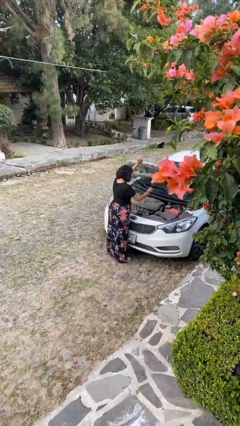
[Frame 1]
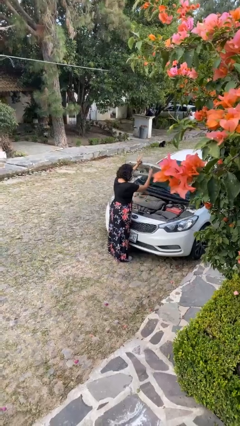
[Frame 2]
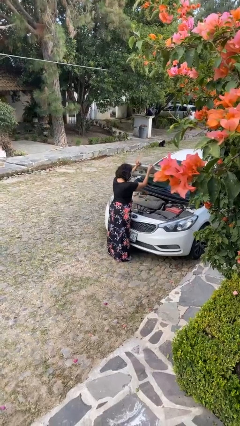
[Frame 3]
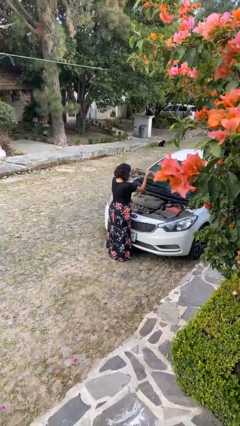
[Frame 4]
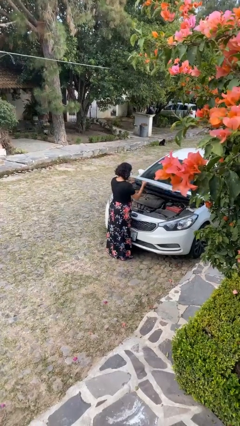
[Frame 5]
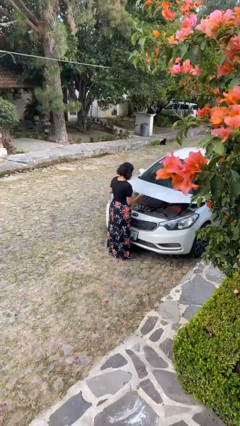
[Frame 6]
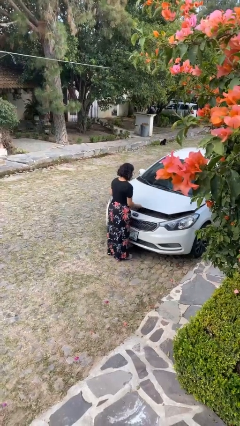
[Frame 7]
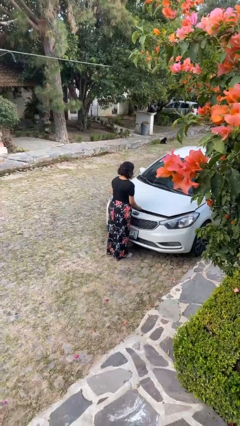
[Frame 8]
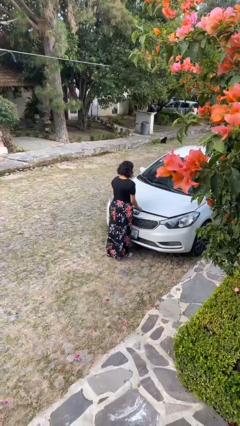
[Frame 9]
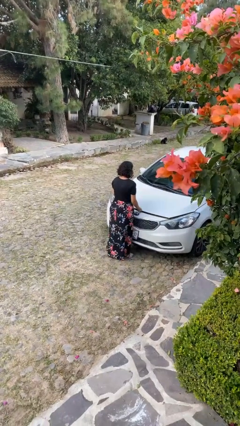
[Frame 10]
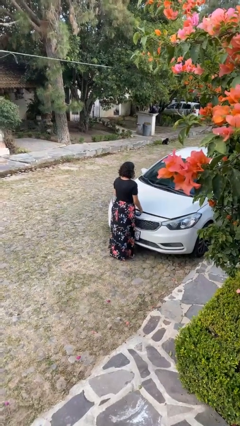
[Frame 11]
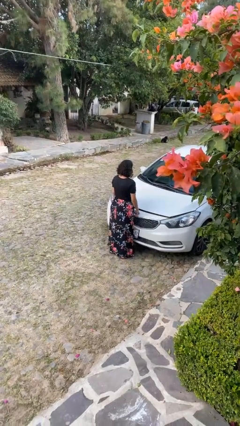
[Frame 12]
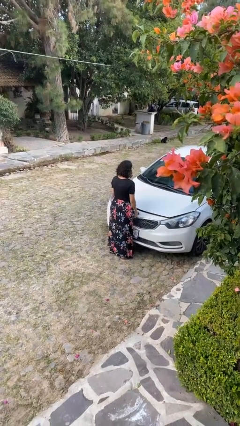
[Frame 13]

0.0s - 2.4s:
person closes car hood

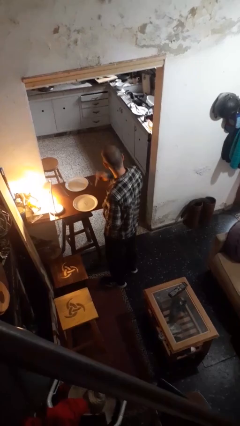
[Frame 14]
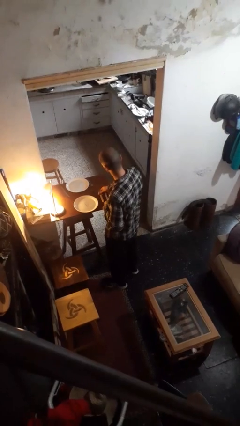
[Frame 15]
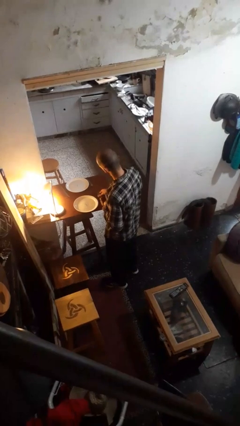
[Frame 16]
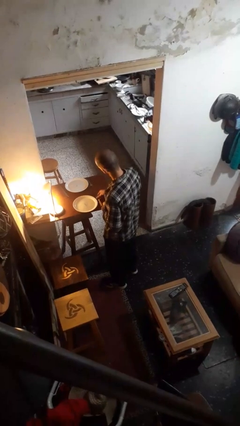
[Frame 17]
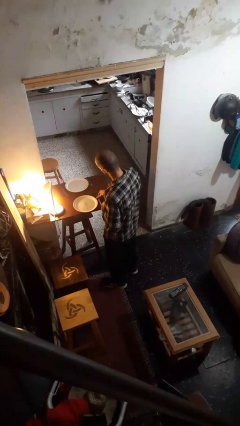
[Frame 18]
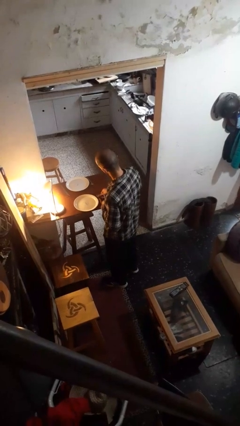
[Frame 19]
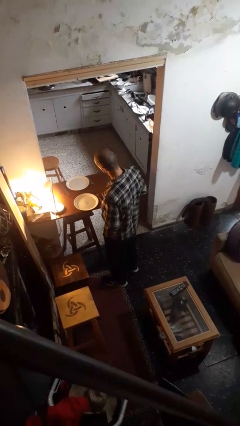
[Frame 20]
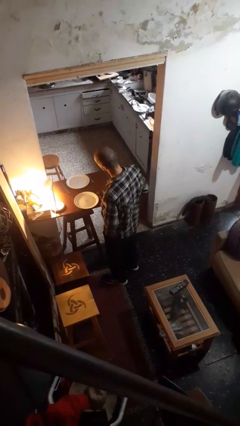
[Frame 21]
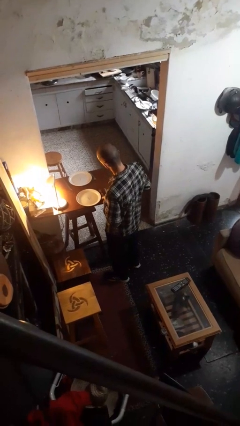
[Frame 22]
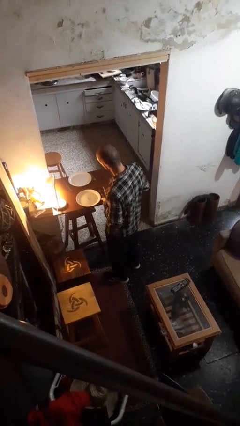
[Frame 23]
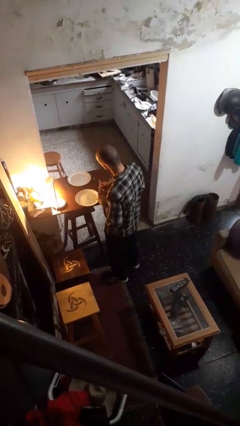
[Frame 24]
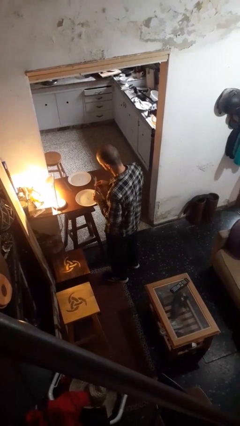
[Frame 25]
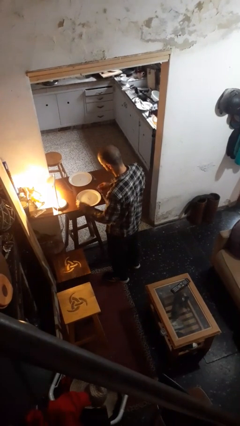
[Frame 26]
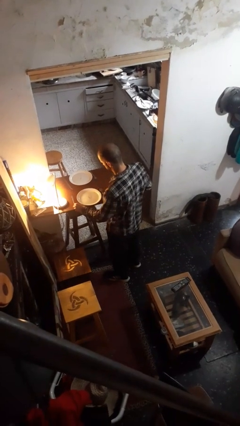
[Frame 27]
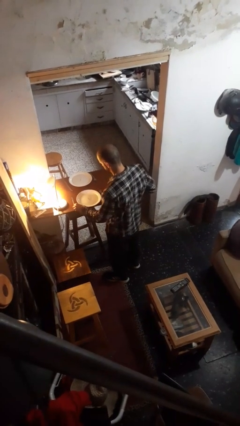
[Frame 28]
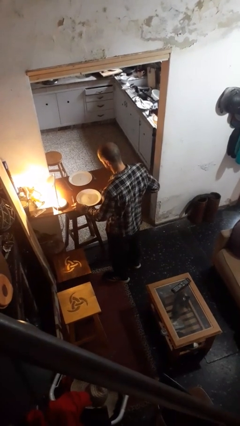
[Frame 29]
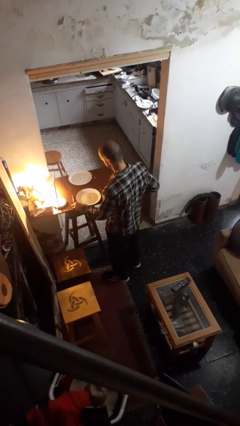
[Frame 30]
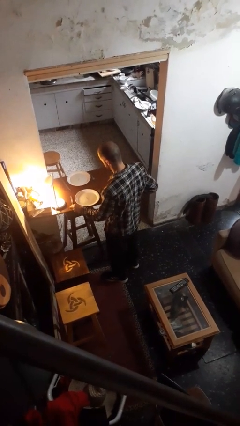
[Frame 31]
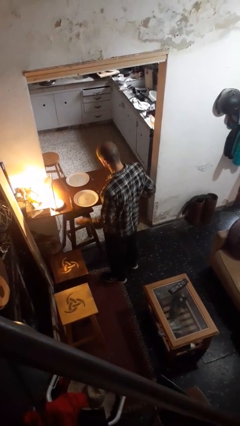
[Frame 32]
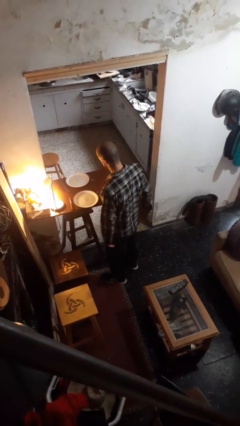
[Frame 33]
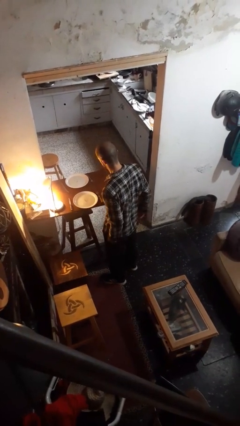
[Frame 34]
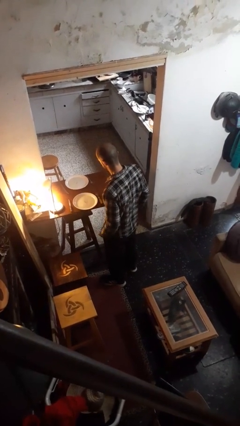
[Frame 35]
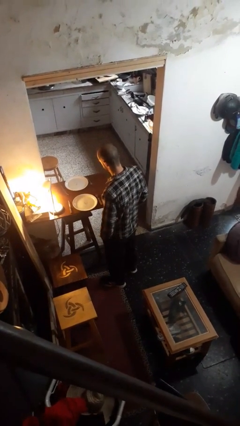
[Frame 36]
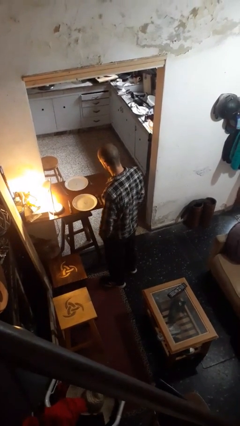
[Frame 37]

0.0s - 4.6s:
person sets table

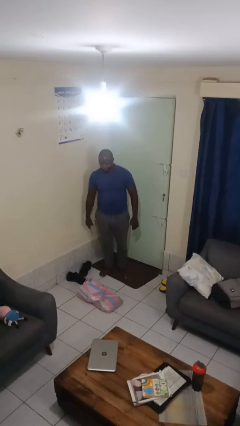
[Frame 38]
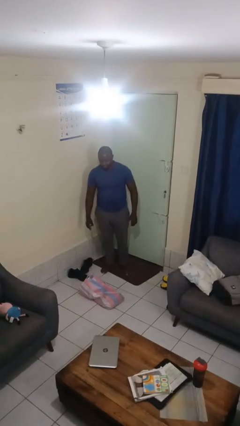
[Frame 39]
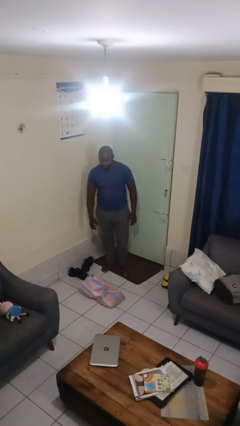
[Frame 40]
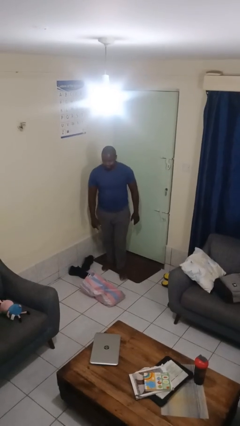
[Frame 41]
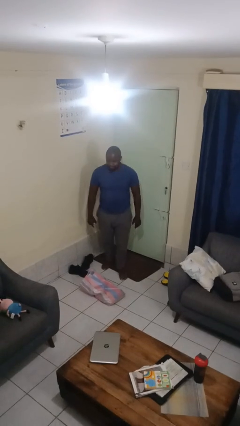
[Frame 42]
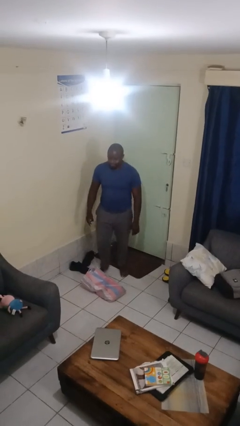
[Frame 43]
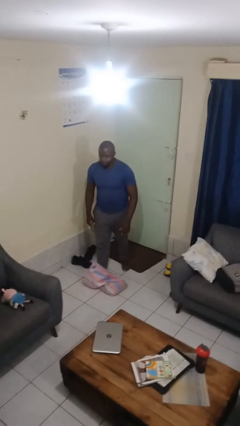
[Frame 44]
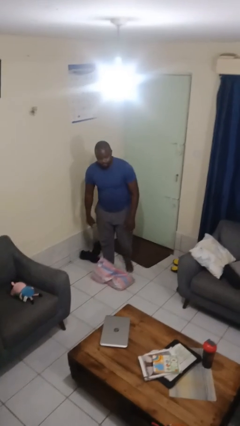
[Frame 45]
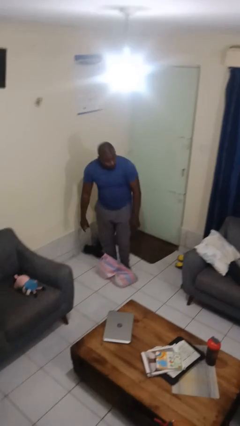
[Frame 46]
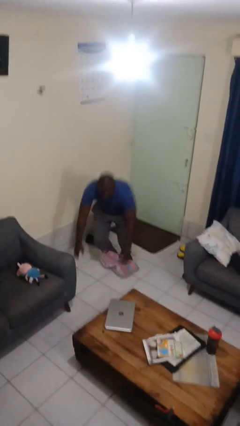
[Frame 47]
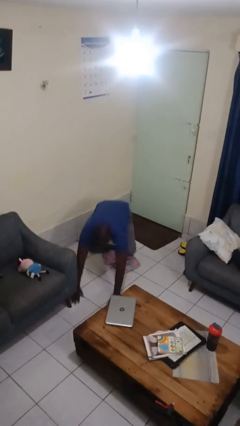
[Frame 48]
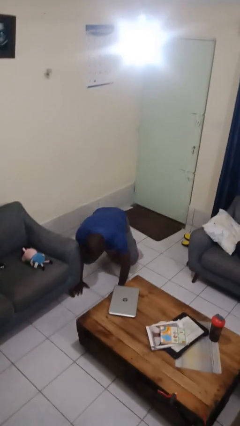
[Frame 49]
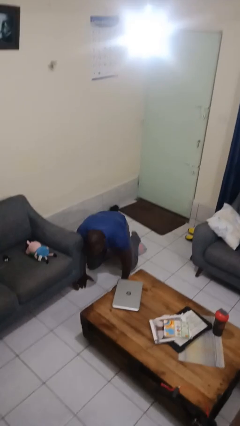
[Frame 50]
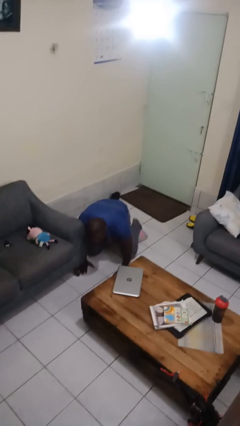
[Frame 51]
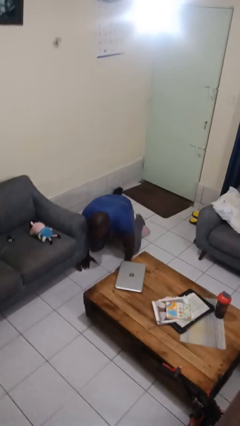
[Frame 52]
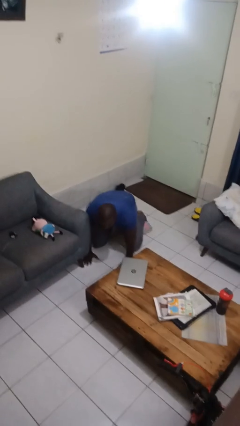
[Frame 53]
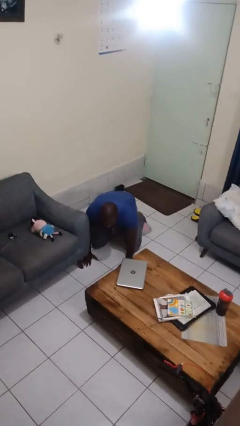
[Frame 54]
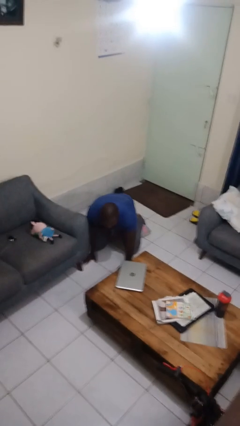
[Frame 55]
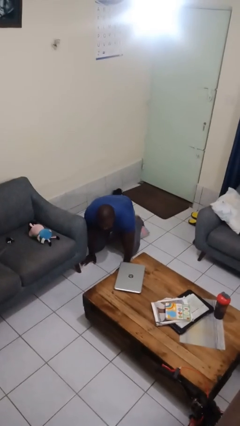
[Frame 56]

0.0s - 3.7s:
person trips on object on floor

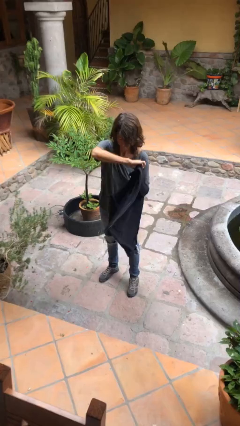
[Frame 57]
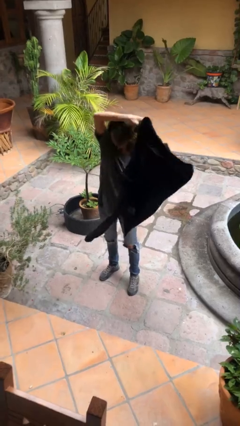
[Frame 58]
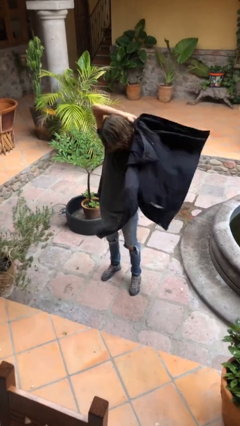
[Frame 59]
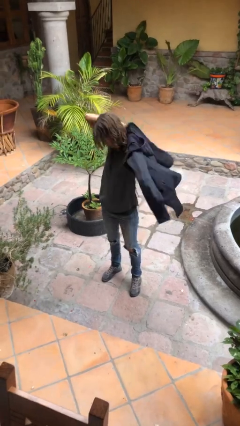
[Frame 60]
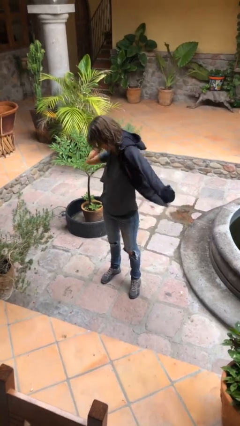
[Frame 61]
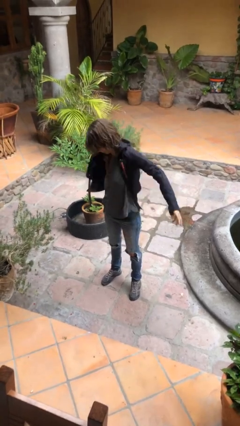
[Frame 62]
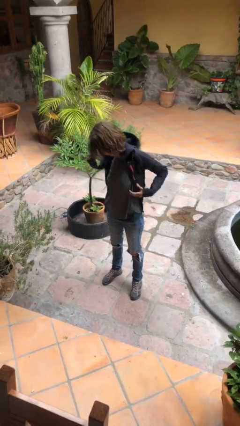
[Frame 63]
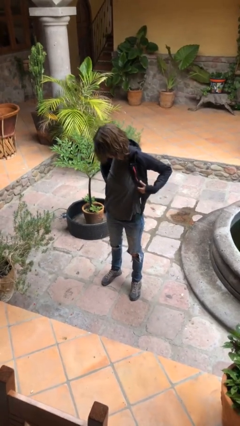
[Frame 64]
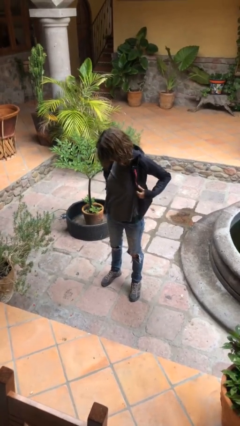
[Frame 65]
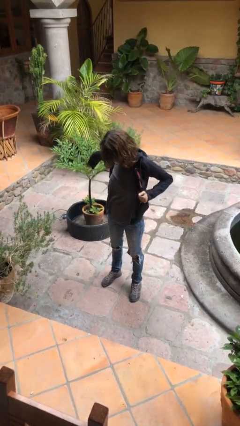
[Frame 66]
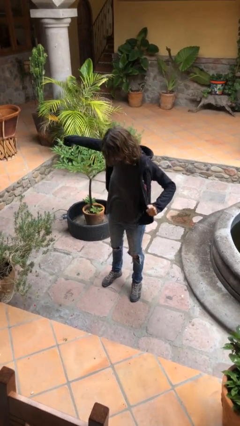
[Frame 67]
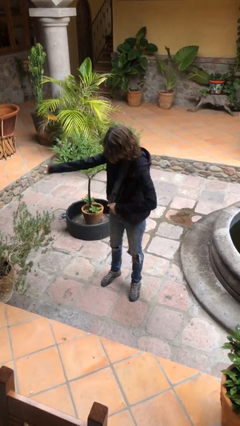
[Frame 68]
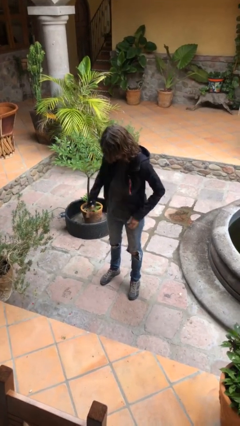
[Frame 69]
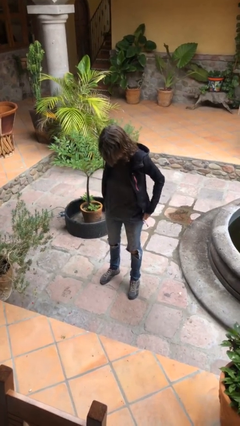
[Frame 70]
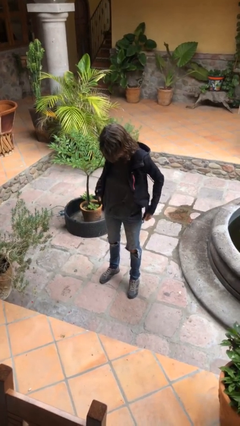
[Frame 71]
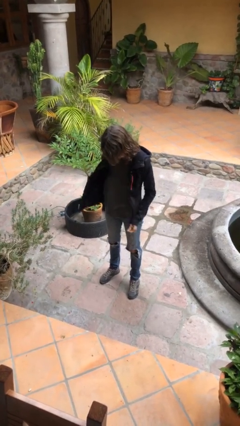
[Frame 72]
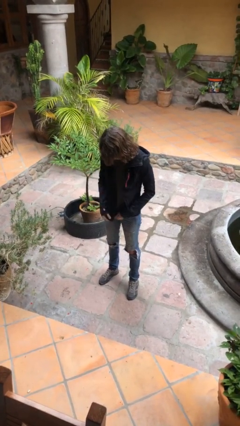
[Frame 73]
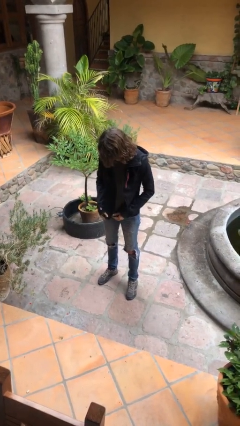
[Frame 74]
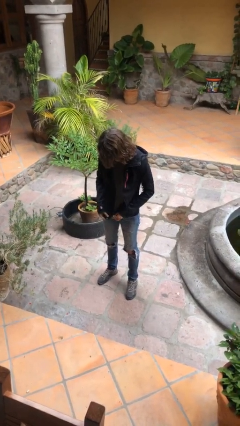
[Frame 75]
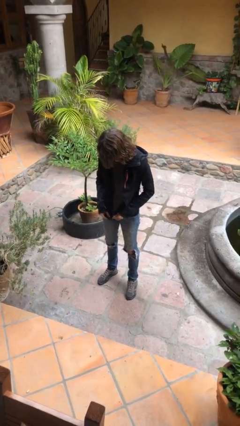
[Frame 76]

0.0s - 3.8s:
person puts on jacket

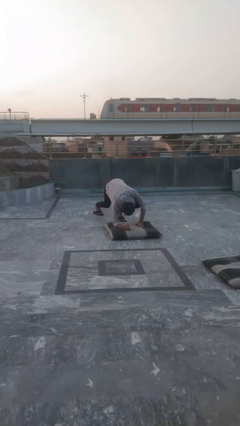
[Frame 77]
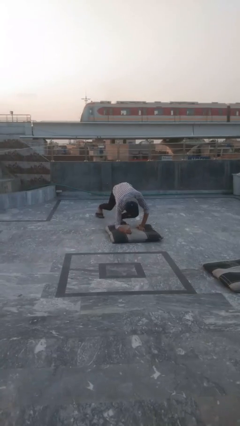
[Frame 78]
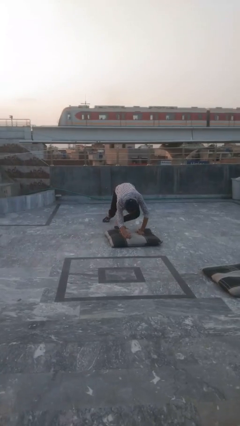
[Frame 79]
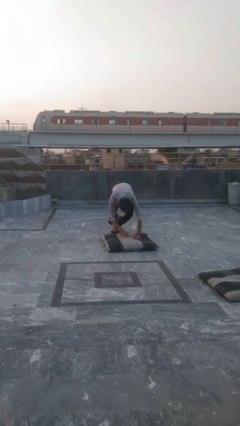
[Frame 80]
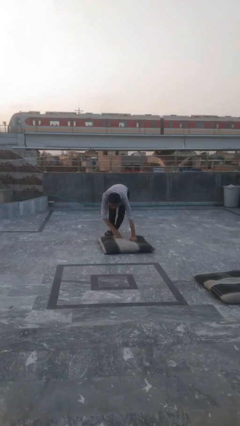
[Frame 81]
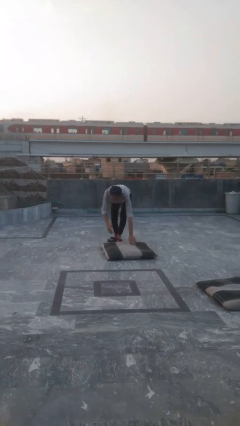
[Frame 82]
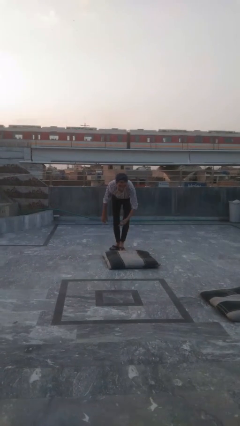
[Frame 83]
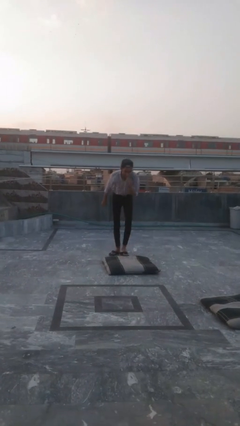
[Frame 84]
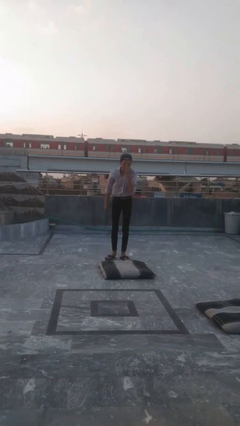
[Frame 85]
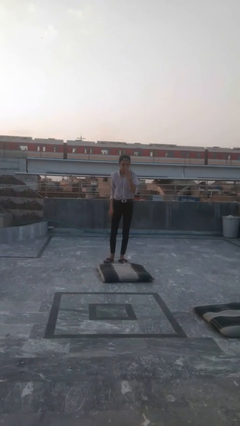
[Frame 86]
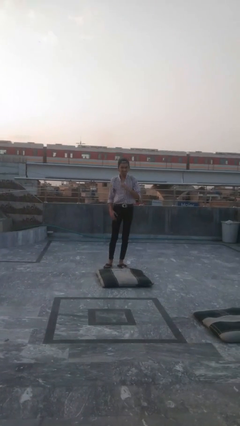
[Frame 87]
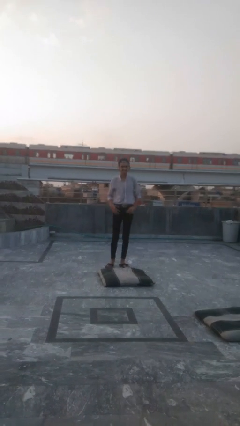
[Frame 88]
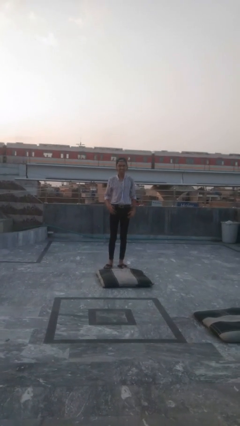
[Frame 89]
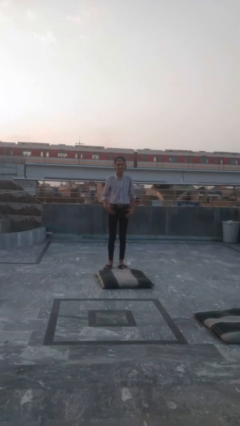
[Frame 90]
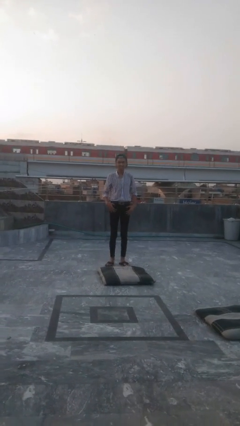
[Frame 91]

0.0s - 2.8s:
person stands up from floor
